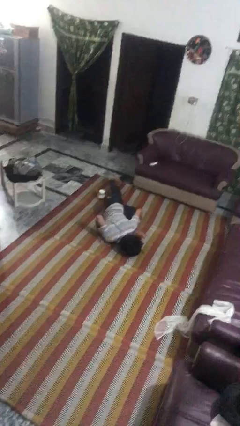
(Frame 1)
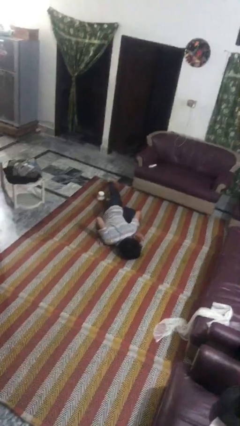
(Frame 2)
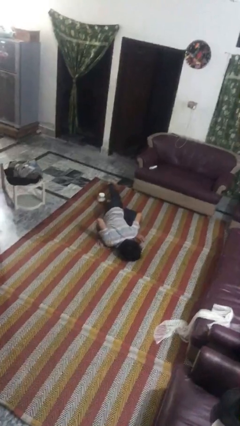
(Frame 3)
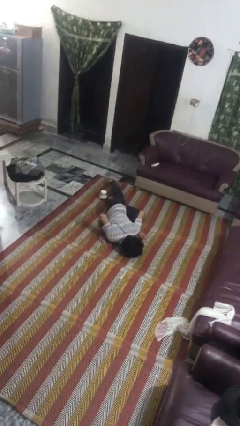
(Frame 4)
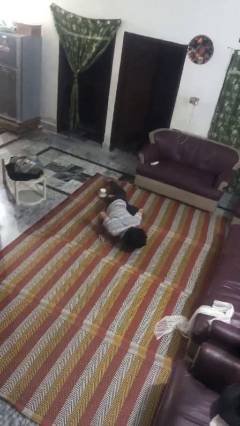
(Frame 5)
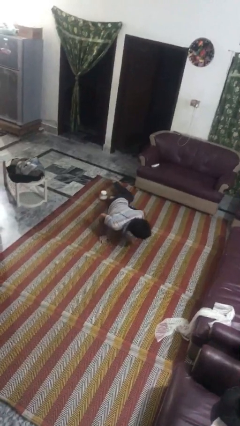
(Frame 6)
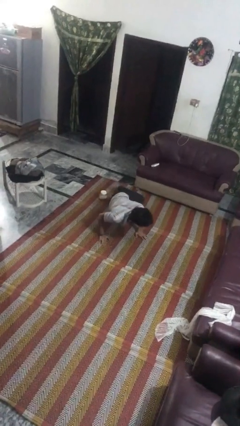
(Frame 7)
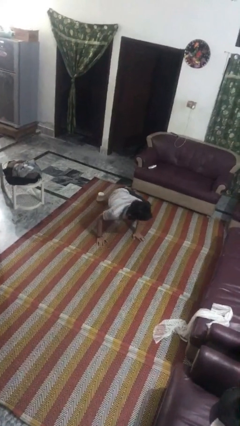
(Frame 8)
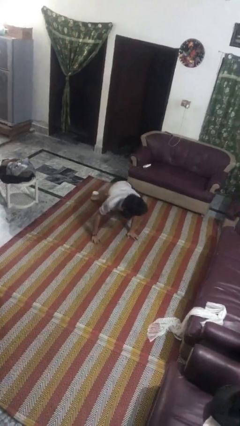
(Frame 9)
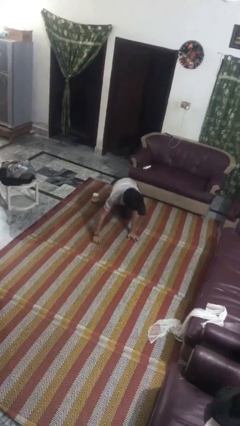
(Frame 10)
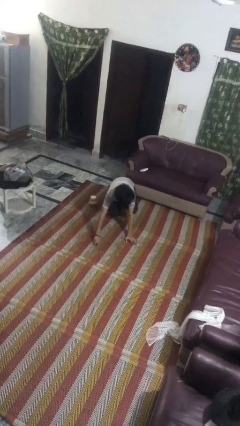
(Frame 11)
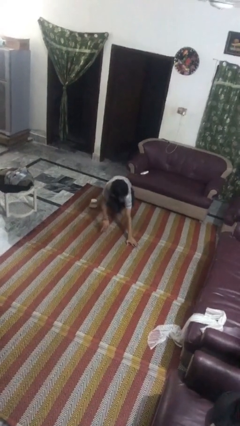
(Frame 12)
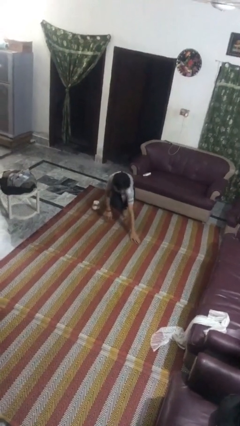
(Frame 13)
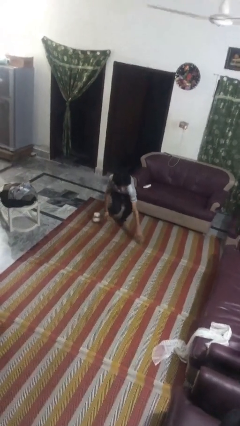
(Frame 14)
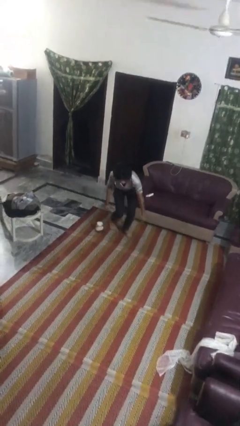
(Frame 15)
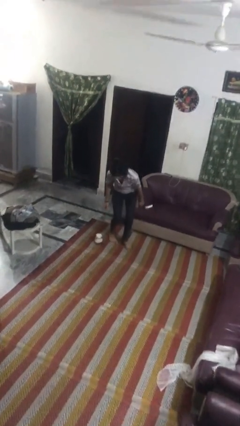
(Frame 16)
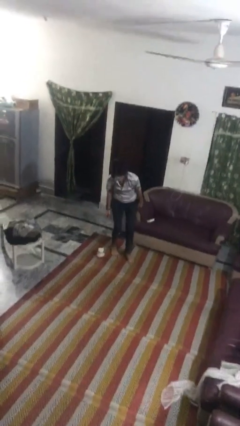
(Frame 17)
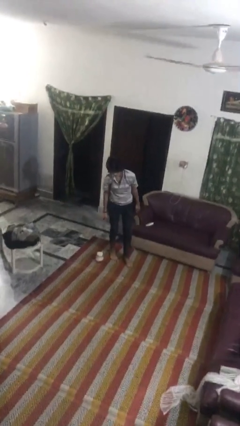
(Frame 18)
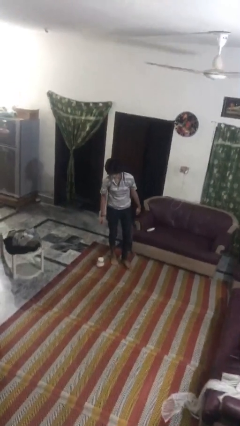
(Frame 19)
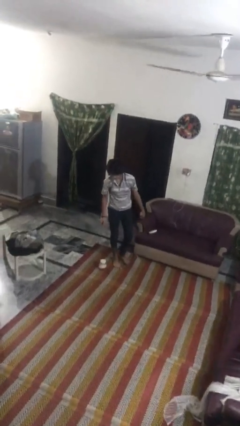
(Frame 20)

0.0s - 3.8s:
person stands up from floor

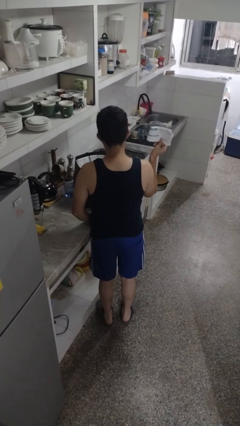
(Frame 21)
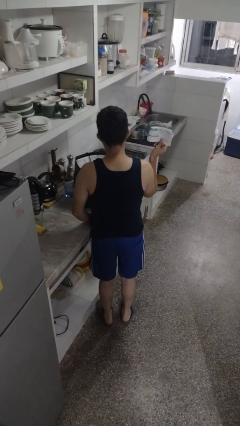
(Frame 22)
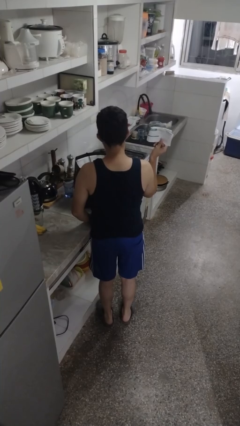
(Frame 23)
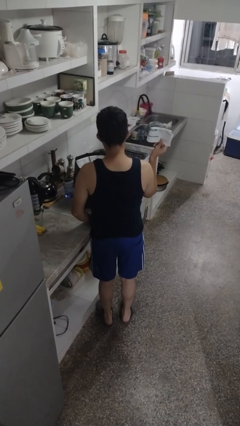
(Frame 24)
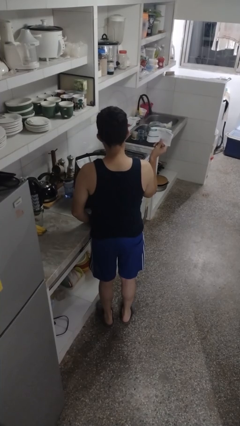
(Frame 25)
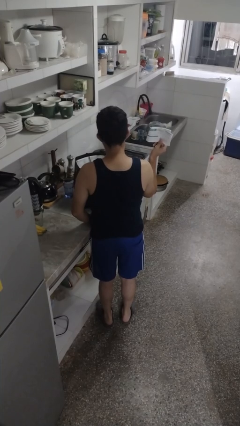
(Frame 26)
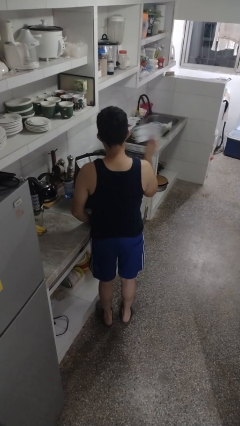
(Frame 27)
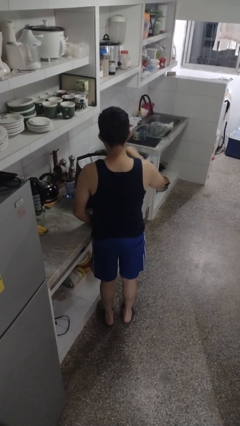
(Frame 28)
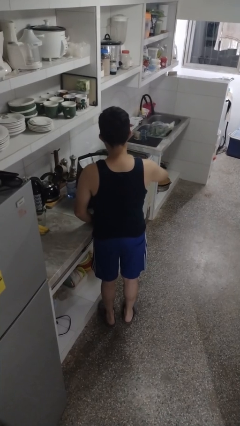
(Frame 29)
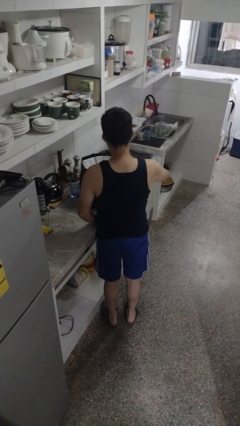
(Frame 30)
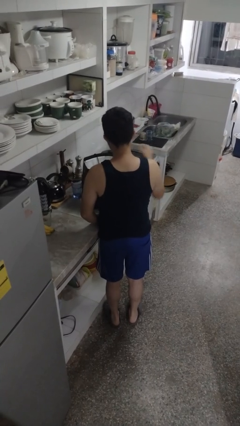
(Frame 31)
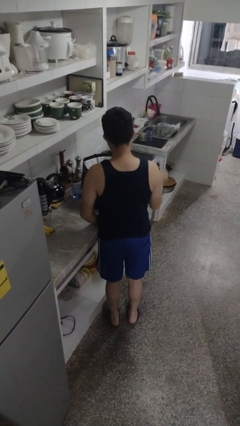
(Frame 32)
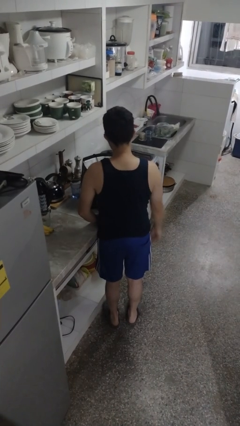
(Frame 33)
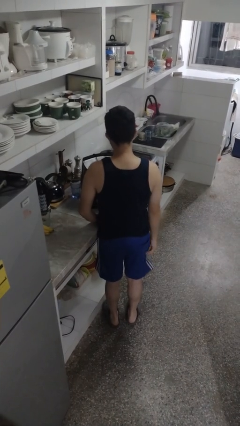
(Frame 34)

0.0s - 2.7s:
person puts object into bag

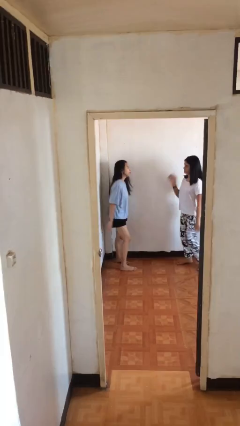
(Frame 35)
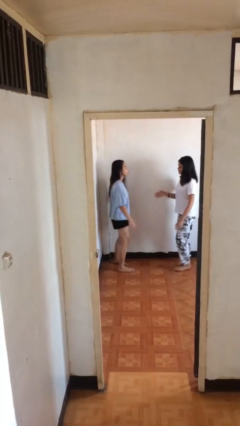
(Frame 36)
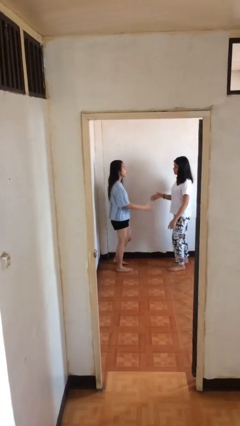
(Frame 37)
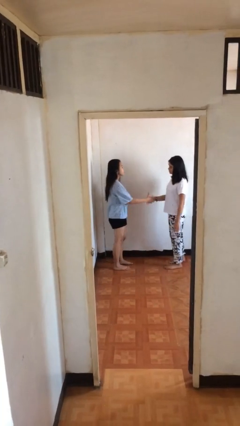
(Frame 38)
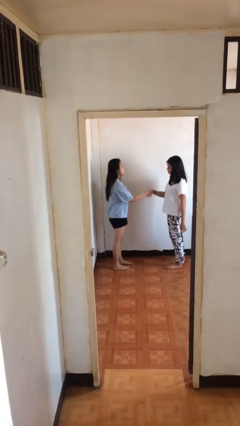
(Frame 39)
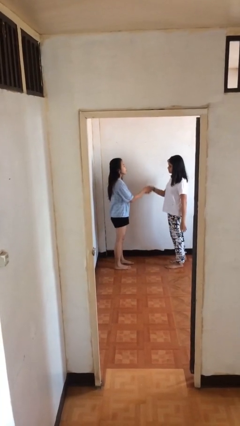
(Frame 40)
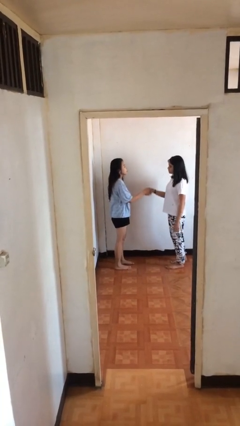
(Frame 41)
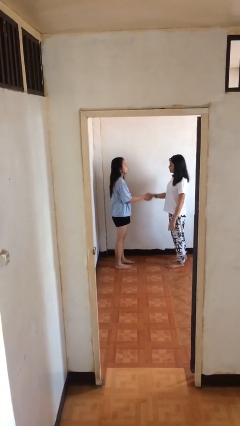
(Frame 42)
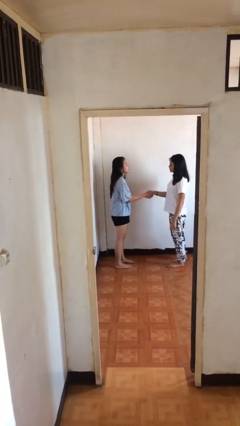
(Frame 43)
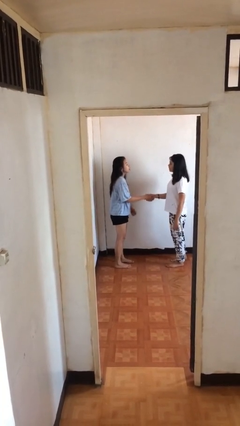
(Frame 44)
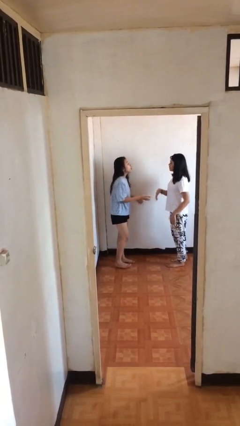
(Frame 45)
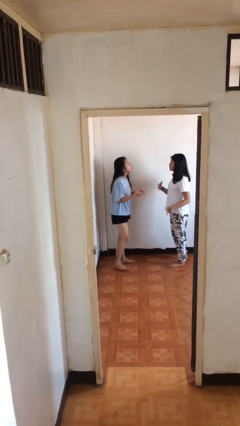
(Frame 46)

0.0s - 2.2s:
person shakes hand

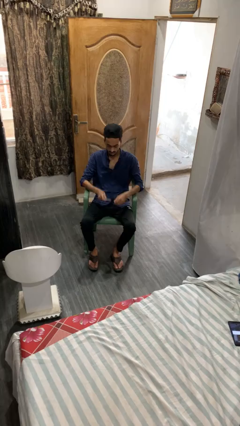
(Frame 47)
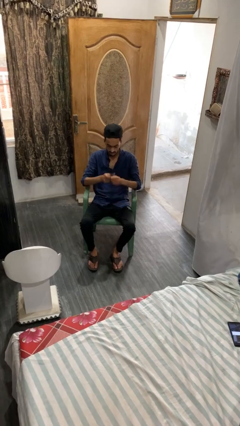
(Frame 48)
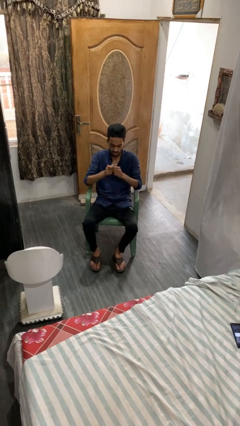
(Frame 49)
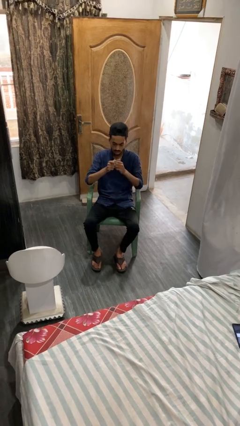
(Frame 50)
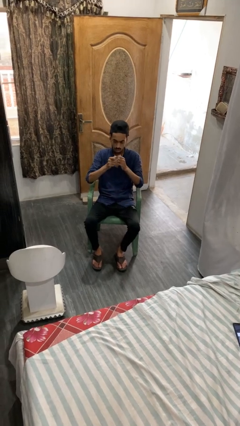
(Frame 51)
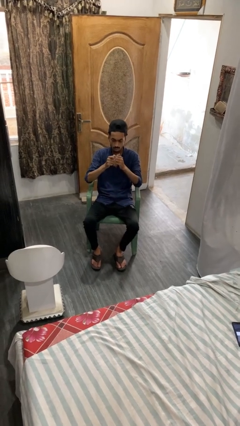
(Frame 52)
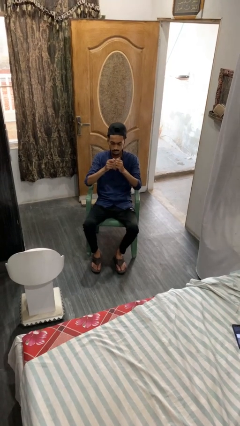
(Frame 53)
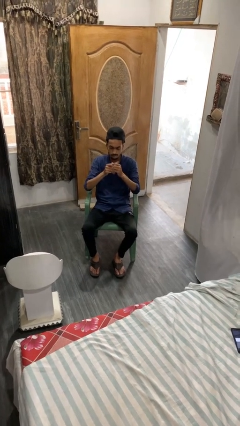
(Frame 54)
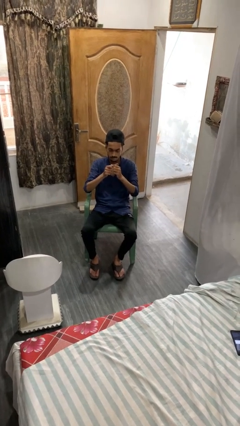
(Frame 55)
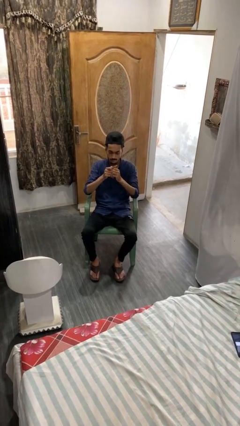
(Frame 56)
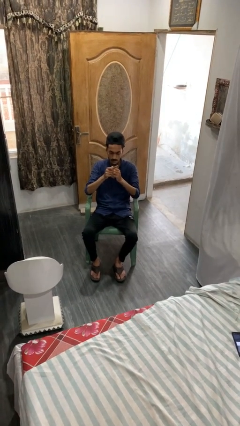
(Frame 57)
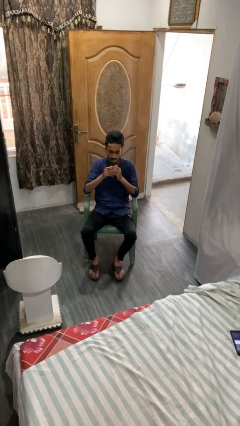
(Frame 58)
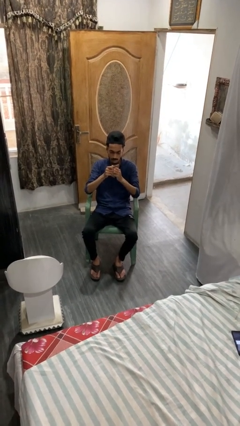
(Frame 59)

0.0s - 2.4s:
person files fingernails

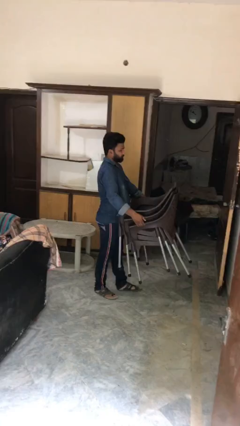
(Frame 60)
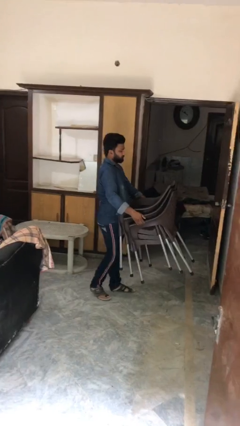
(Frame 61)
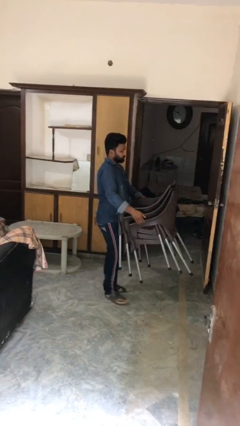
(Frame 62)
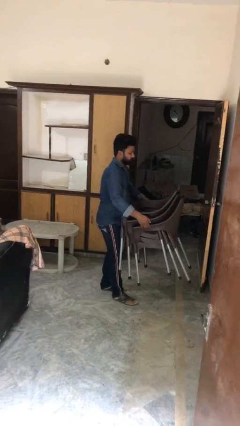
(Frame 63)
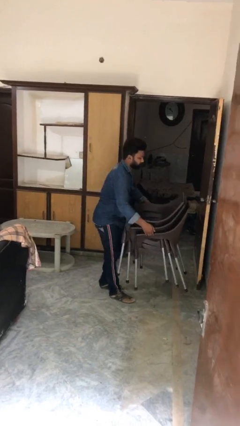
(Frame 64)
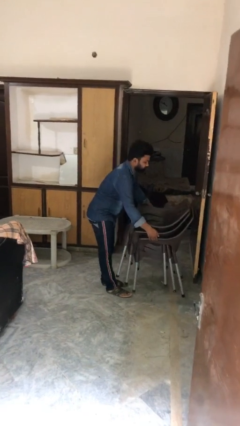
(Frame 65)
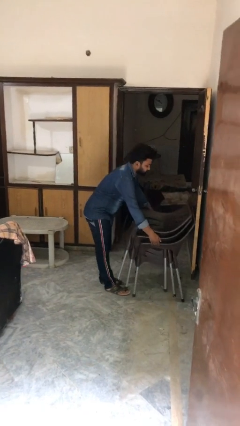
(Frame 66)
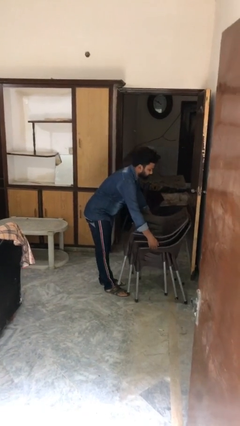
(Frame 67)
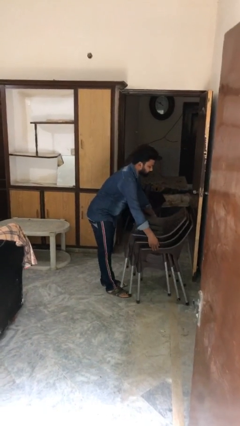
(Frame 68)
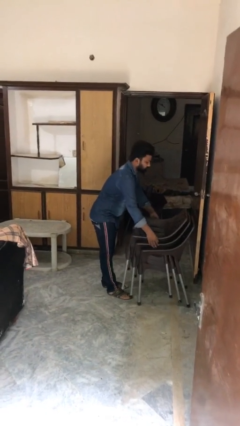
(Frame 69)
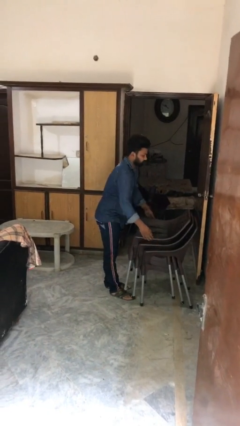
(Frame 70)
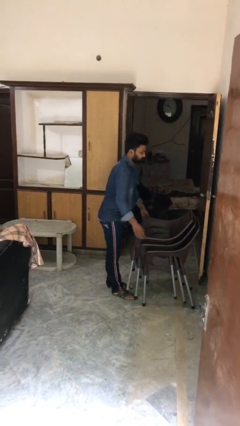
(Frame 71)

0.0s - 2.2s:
person puts down object on floor

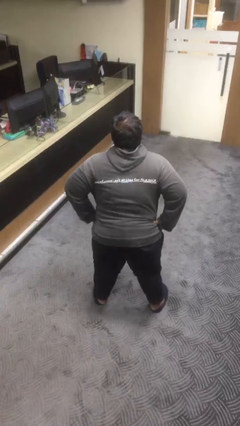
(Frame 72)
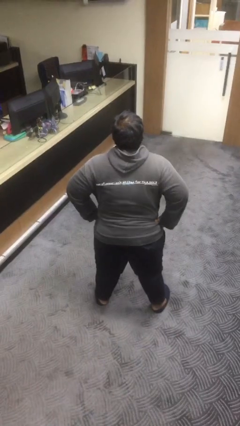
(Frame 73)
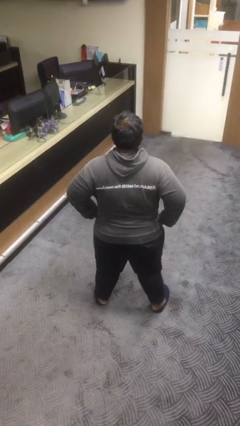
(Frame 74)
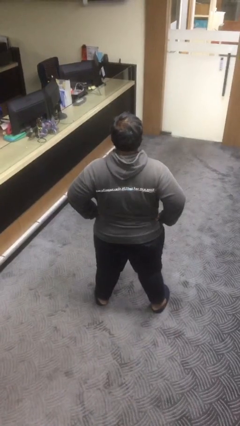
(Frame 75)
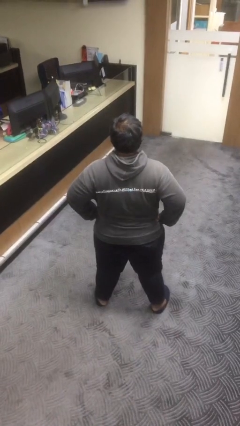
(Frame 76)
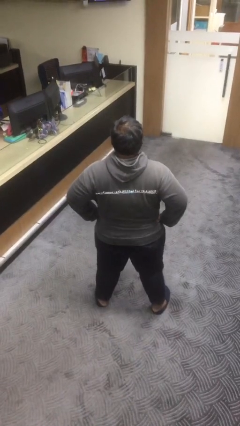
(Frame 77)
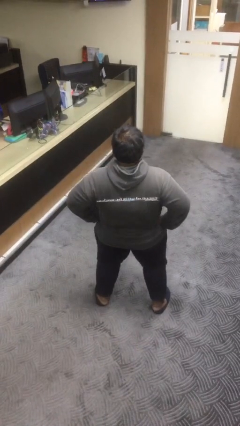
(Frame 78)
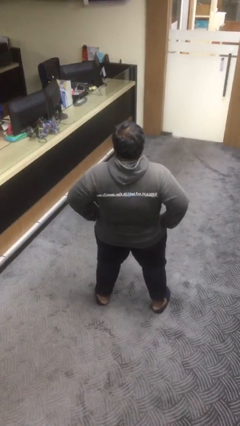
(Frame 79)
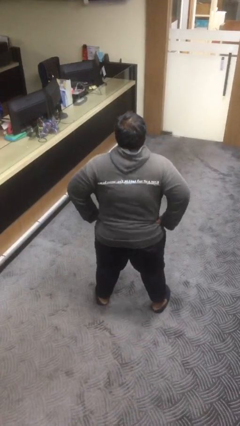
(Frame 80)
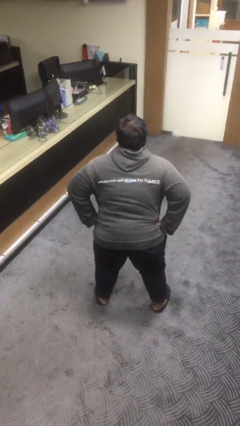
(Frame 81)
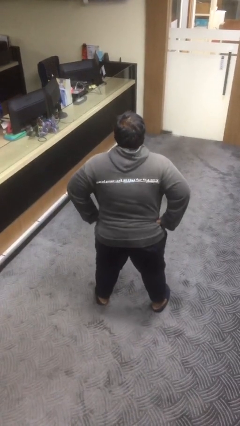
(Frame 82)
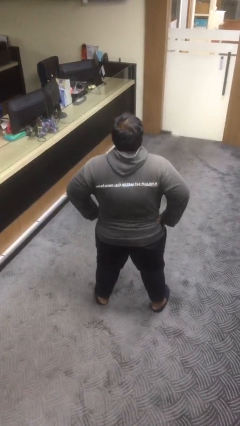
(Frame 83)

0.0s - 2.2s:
person wiggles hips

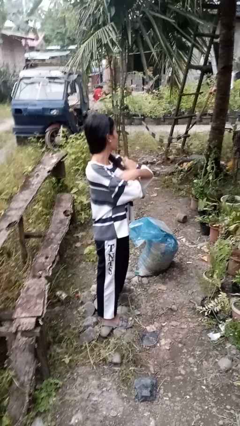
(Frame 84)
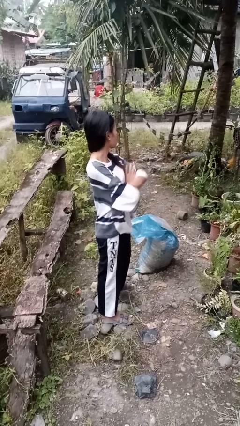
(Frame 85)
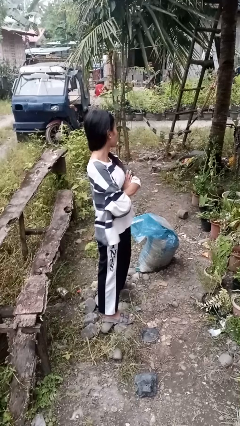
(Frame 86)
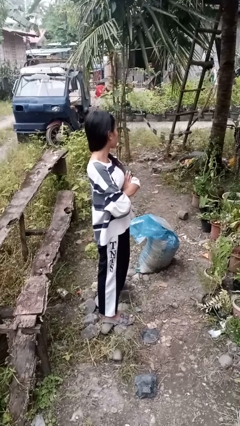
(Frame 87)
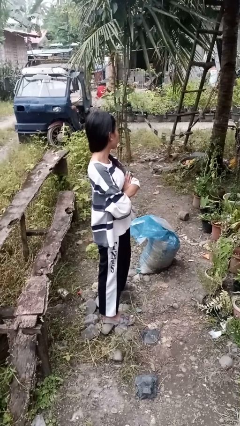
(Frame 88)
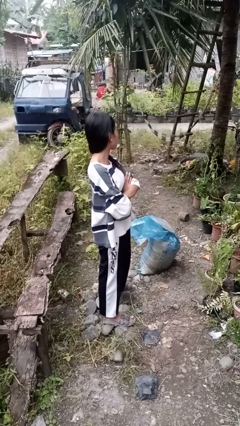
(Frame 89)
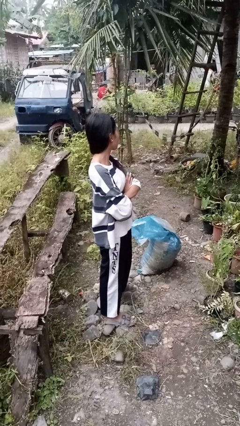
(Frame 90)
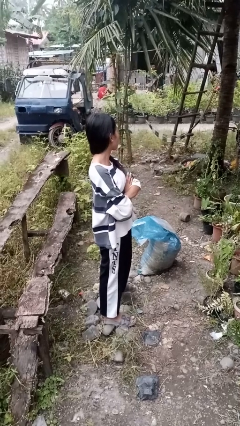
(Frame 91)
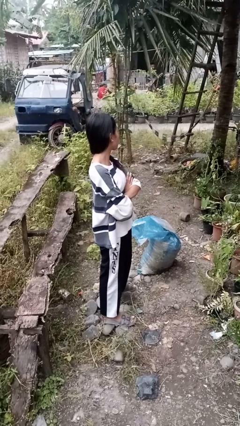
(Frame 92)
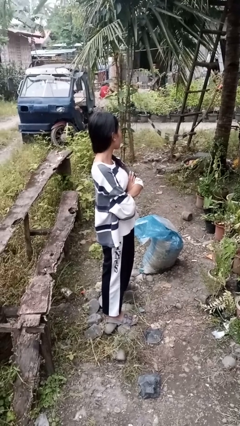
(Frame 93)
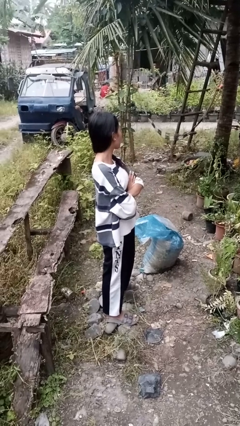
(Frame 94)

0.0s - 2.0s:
person crosses arms
